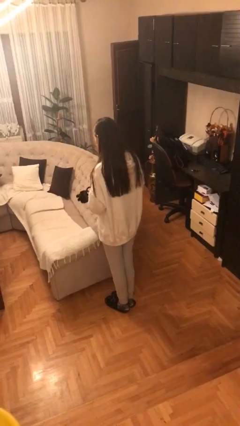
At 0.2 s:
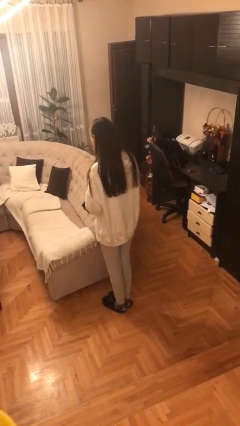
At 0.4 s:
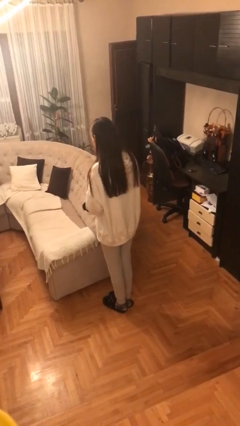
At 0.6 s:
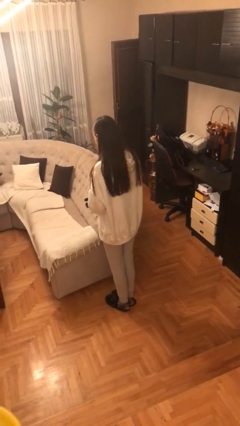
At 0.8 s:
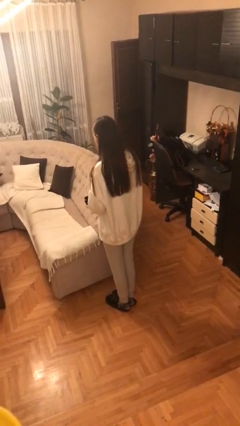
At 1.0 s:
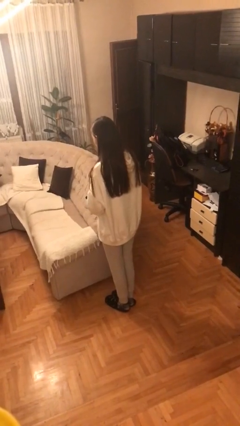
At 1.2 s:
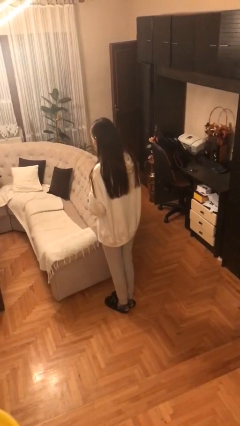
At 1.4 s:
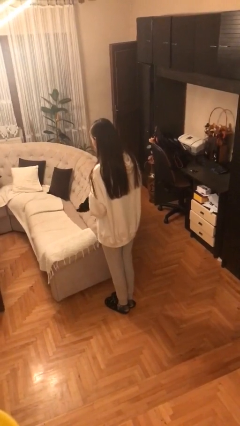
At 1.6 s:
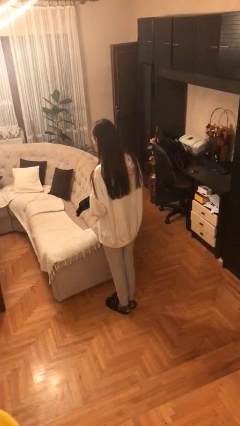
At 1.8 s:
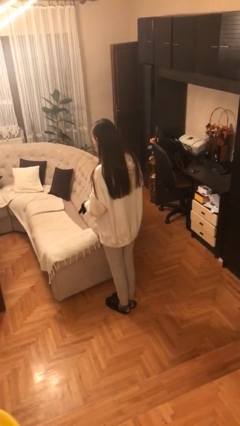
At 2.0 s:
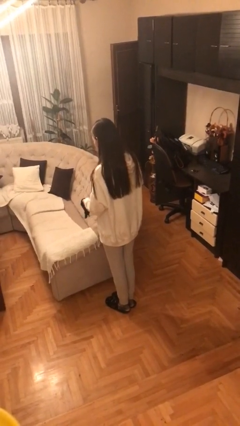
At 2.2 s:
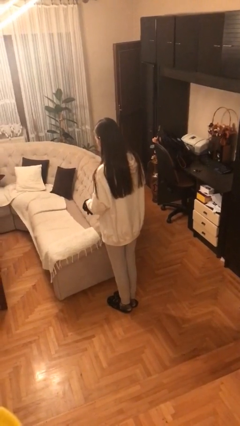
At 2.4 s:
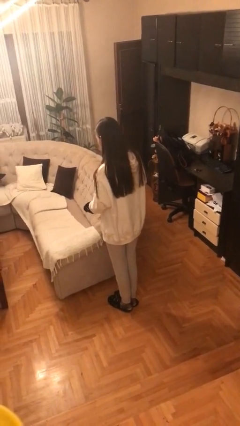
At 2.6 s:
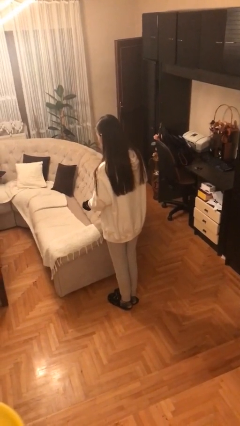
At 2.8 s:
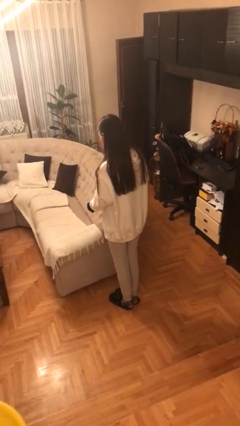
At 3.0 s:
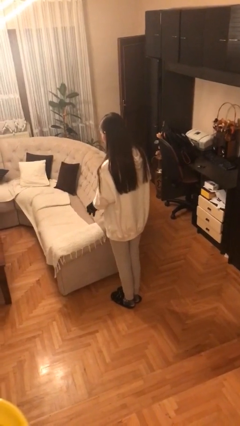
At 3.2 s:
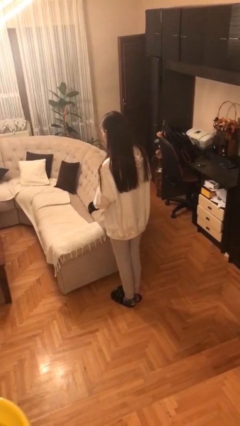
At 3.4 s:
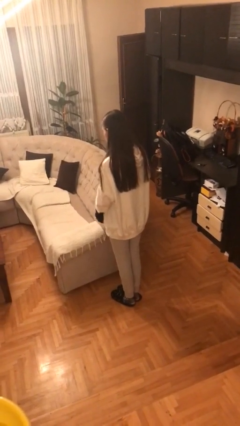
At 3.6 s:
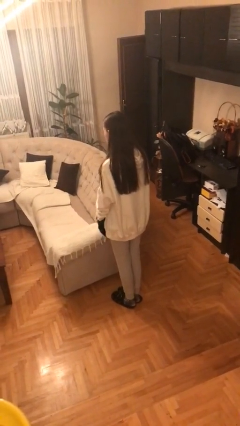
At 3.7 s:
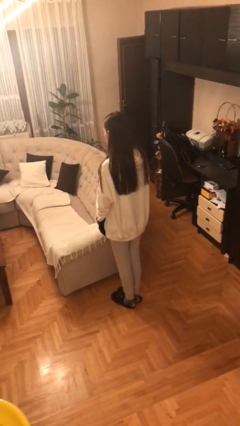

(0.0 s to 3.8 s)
person puts on gloves

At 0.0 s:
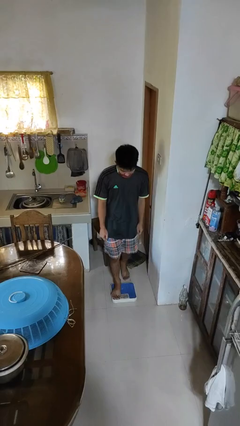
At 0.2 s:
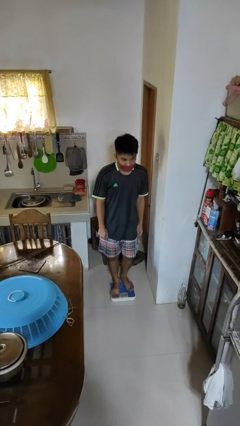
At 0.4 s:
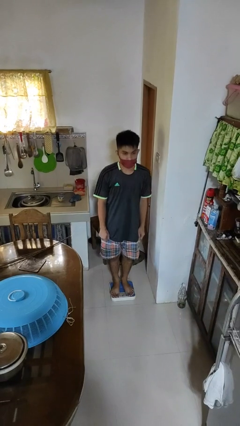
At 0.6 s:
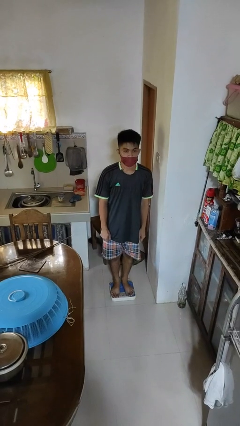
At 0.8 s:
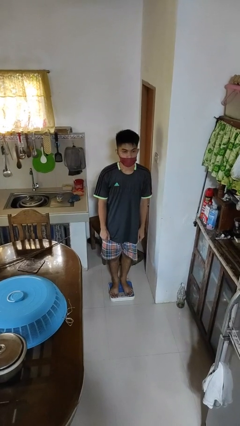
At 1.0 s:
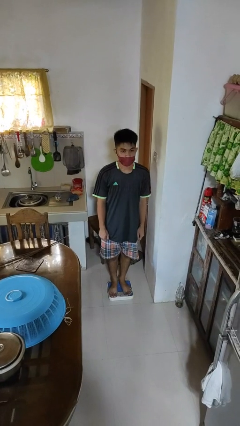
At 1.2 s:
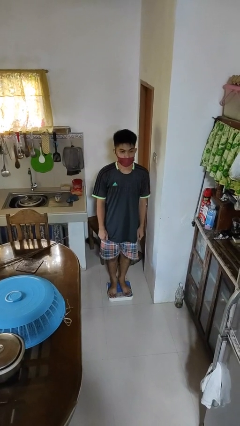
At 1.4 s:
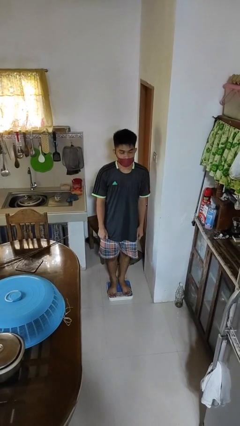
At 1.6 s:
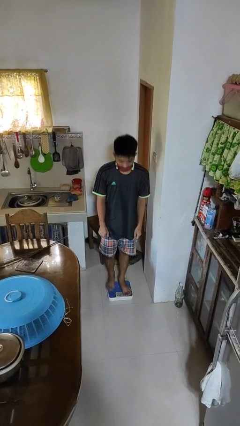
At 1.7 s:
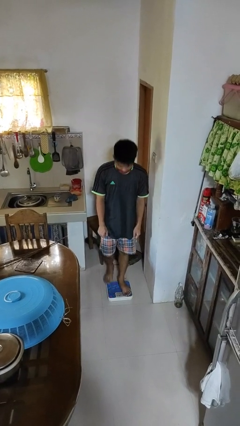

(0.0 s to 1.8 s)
person uses bodyweight scale

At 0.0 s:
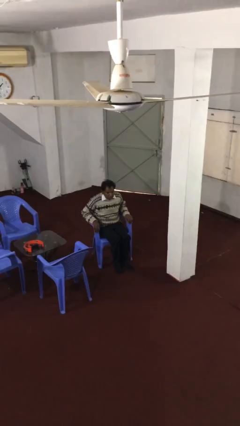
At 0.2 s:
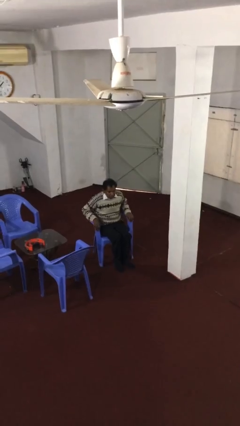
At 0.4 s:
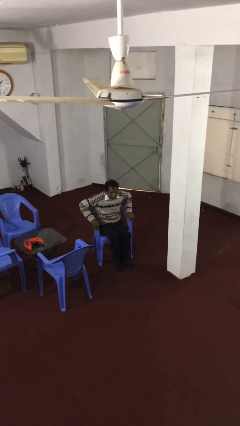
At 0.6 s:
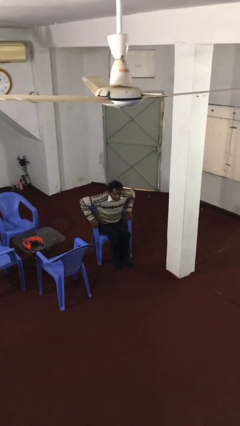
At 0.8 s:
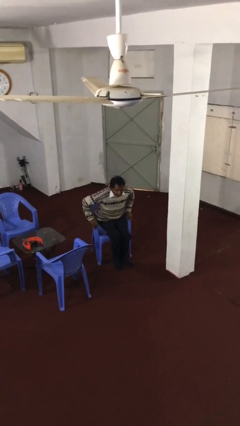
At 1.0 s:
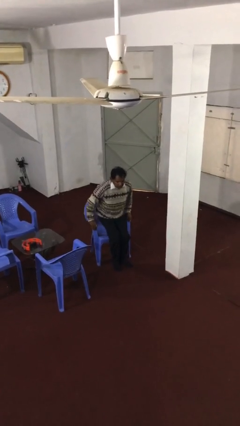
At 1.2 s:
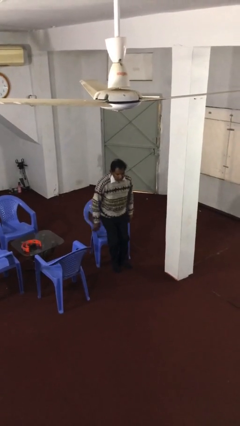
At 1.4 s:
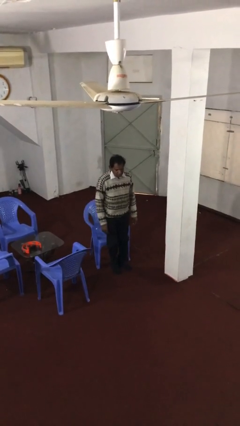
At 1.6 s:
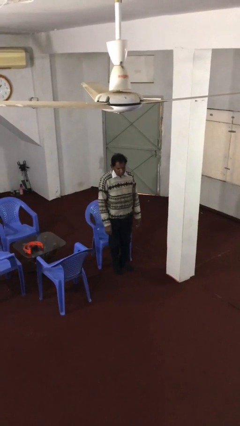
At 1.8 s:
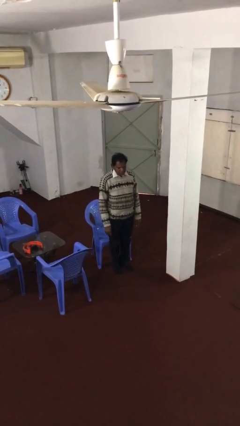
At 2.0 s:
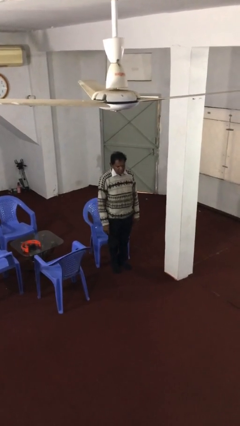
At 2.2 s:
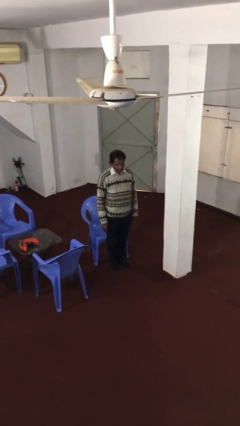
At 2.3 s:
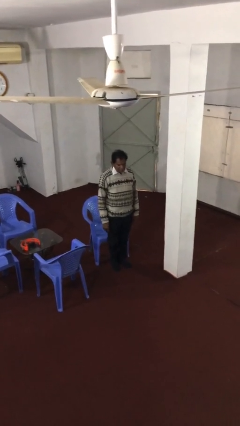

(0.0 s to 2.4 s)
person stands up

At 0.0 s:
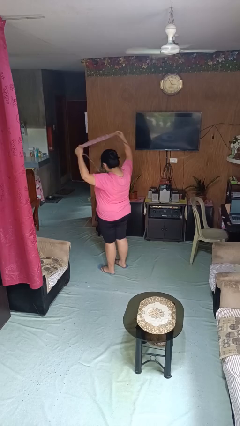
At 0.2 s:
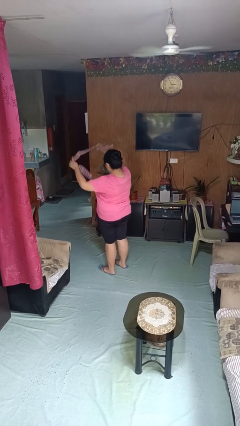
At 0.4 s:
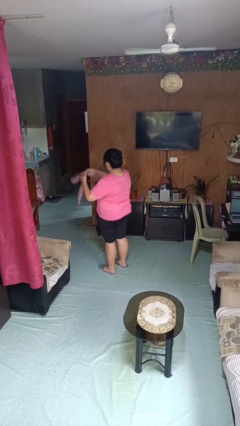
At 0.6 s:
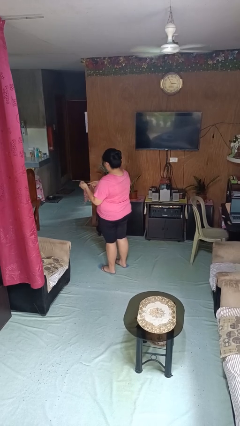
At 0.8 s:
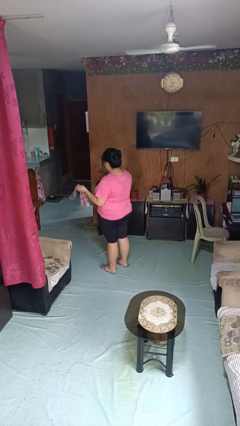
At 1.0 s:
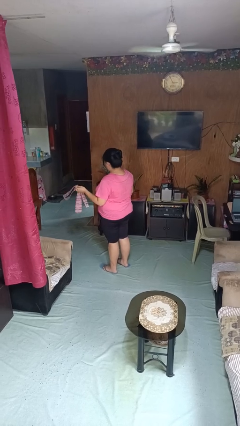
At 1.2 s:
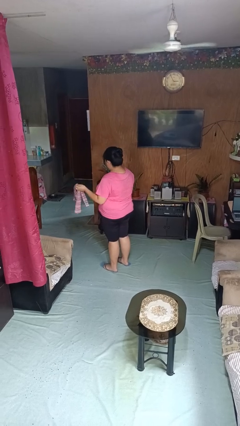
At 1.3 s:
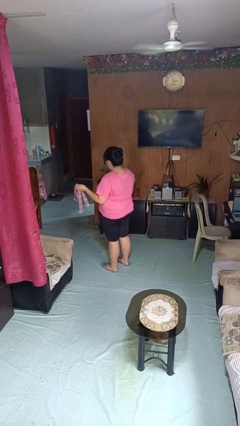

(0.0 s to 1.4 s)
person takes off necktie

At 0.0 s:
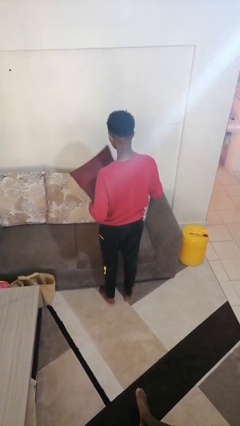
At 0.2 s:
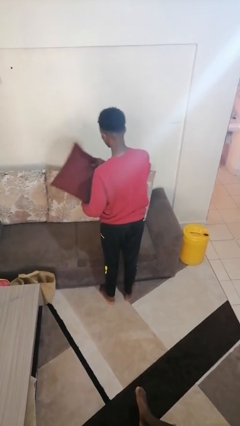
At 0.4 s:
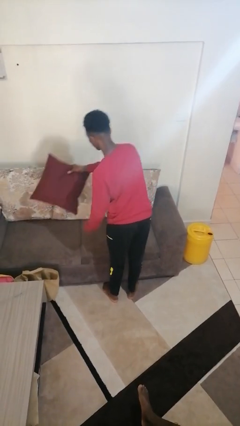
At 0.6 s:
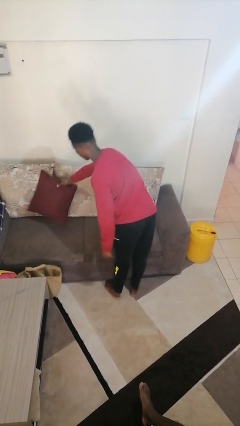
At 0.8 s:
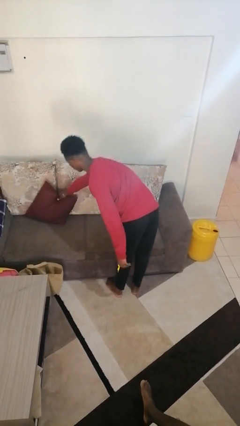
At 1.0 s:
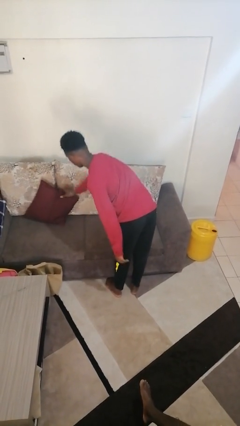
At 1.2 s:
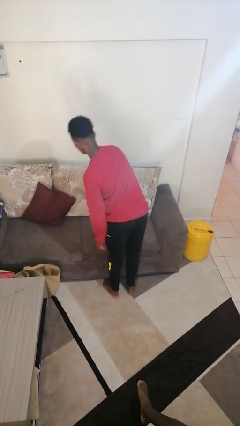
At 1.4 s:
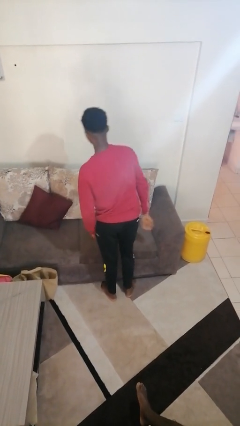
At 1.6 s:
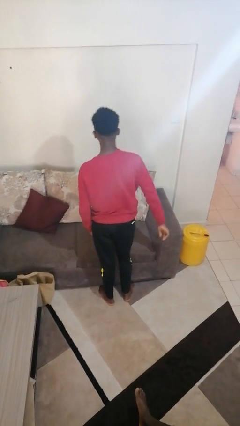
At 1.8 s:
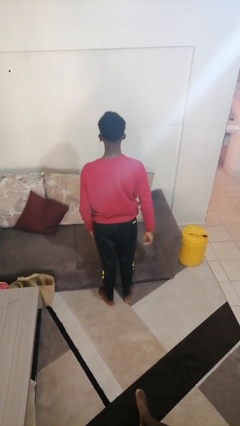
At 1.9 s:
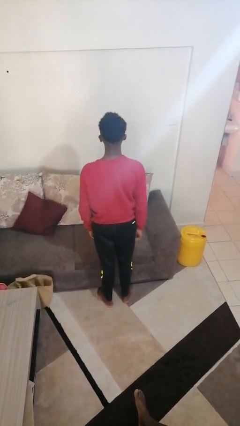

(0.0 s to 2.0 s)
person puts down object on couch

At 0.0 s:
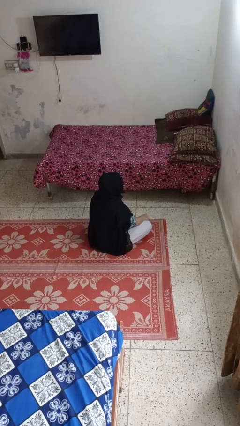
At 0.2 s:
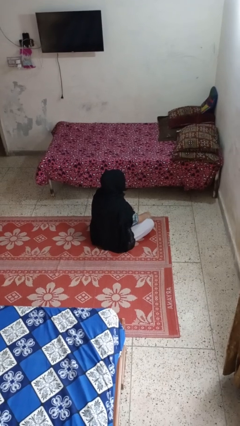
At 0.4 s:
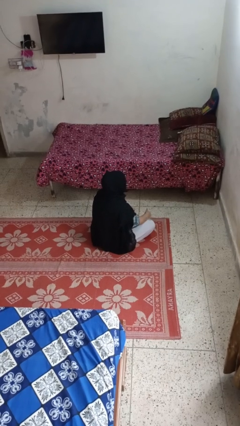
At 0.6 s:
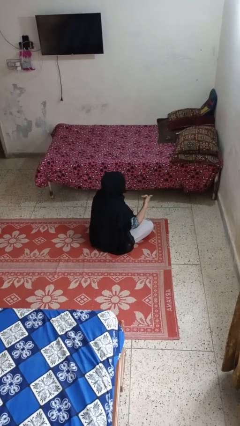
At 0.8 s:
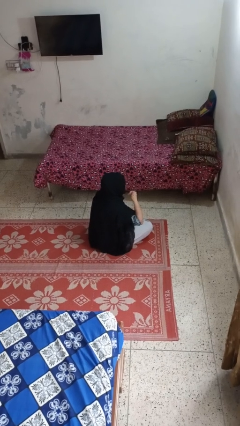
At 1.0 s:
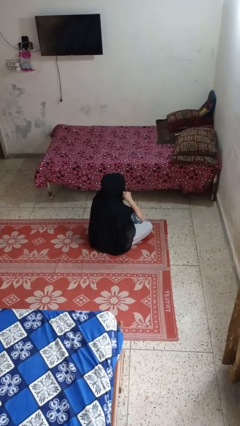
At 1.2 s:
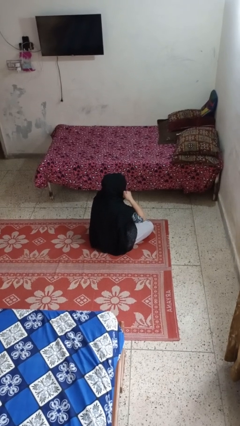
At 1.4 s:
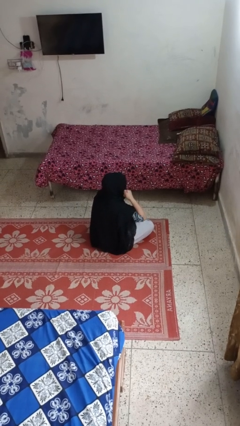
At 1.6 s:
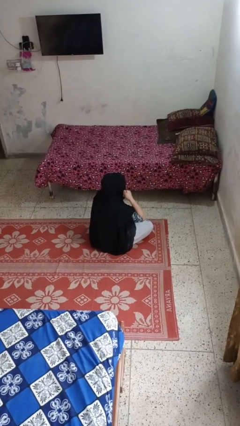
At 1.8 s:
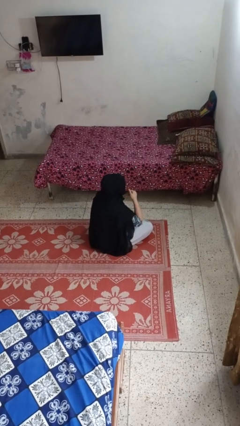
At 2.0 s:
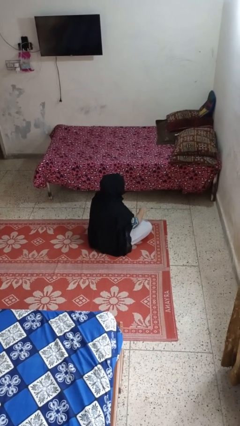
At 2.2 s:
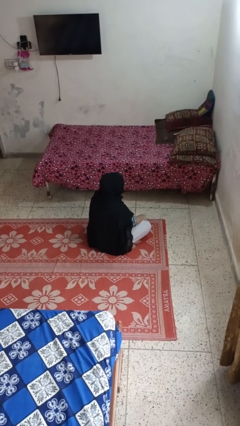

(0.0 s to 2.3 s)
person gestures call me

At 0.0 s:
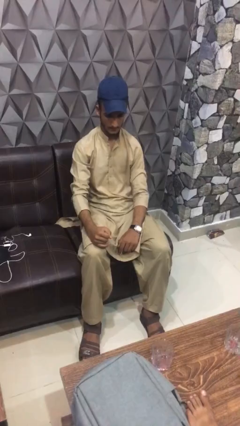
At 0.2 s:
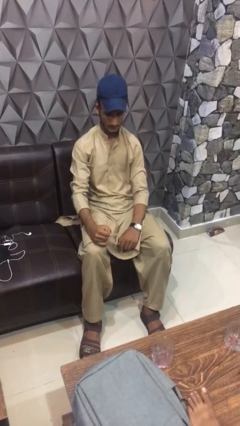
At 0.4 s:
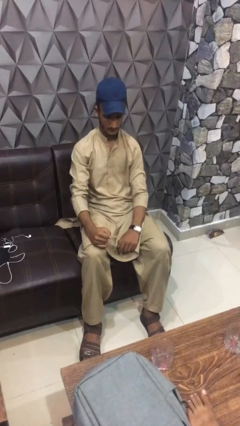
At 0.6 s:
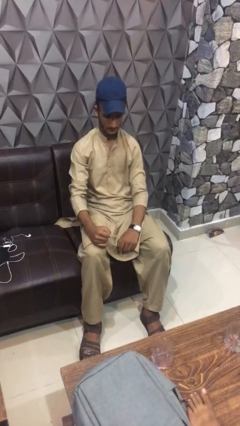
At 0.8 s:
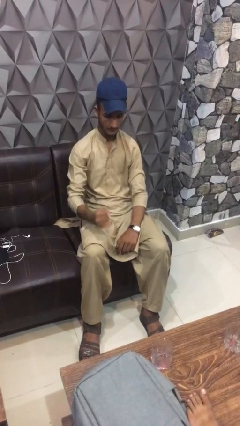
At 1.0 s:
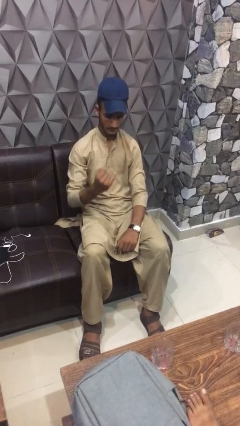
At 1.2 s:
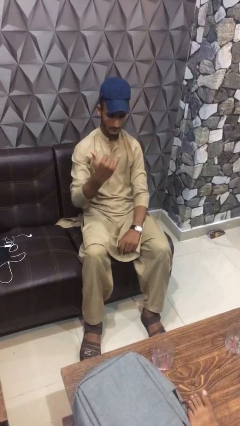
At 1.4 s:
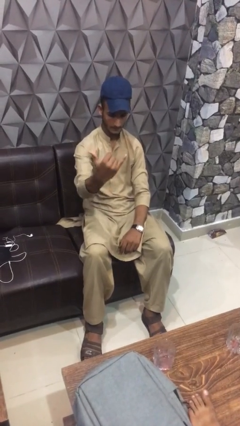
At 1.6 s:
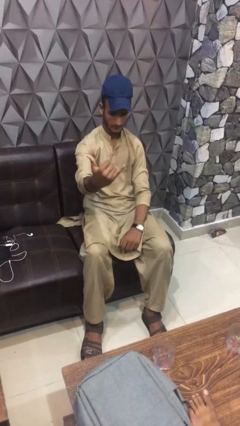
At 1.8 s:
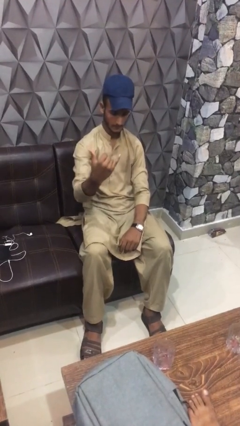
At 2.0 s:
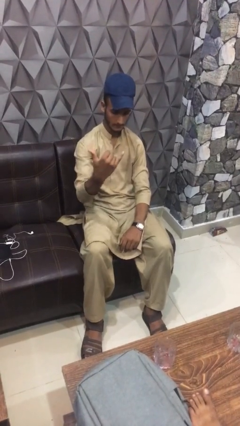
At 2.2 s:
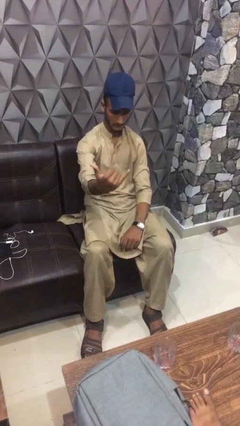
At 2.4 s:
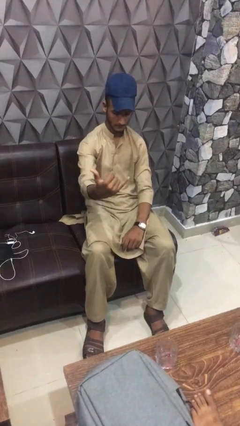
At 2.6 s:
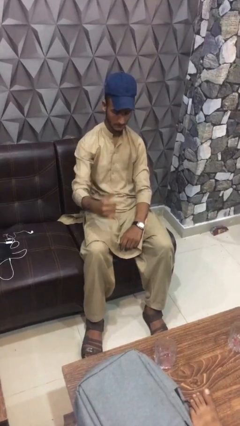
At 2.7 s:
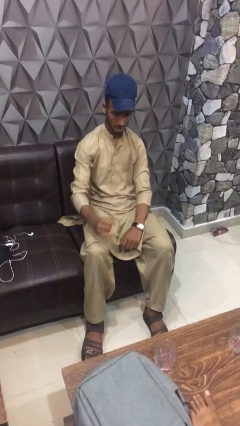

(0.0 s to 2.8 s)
person gestures hang loose

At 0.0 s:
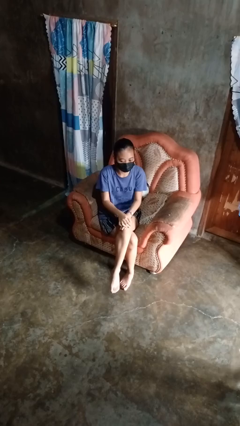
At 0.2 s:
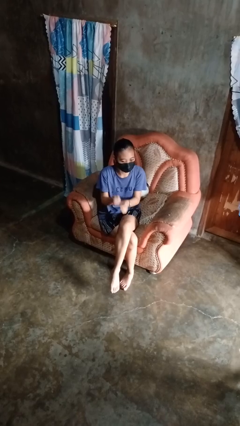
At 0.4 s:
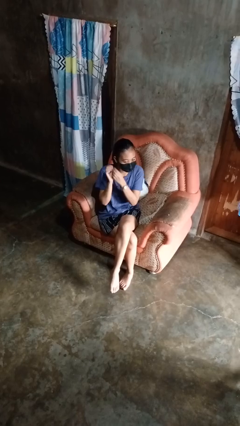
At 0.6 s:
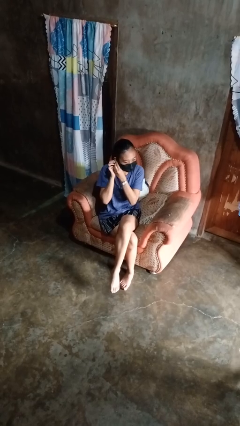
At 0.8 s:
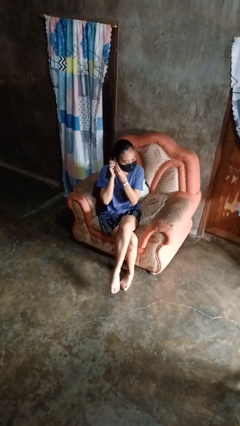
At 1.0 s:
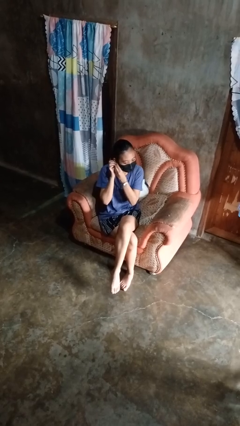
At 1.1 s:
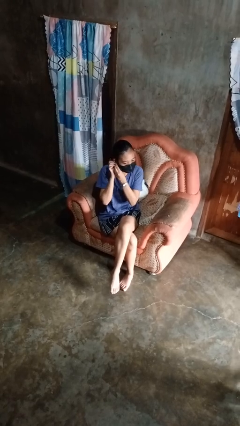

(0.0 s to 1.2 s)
person takes off earrings
